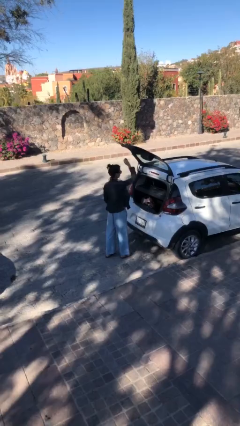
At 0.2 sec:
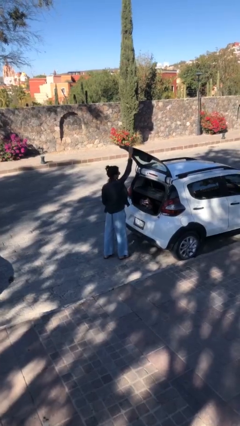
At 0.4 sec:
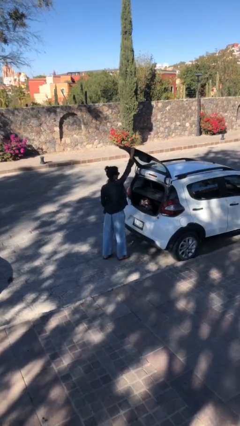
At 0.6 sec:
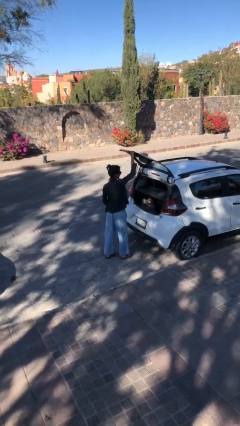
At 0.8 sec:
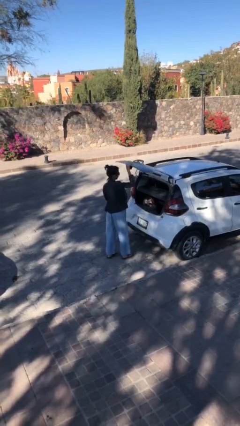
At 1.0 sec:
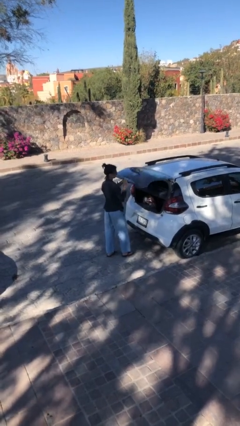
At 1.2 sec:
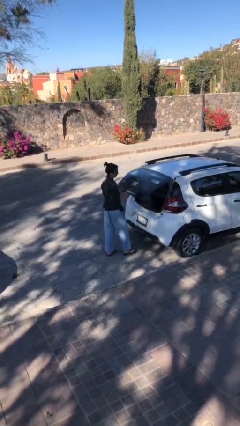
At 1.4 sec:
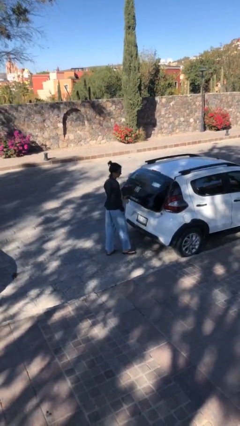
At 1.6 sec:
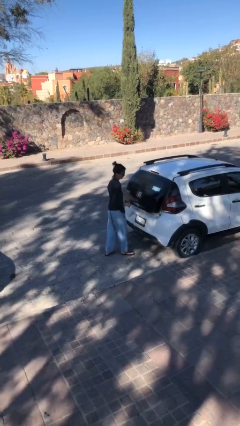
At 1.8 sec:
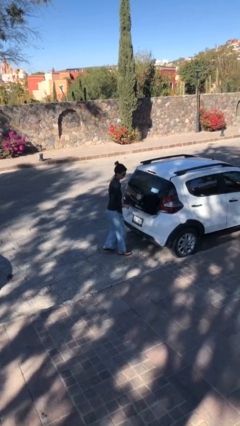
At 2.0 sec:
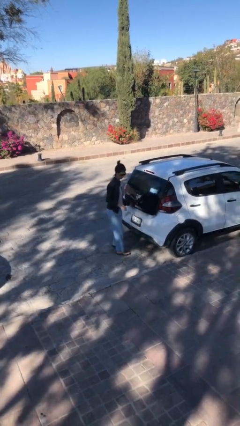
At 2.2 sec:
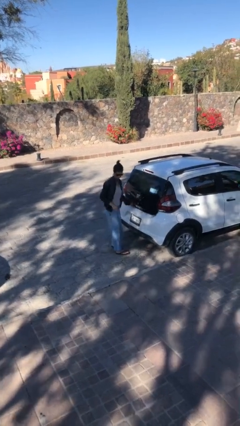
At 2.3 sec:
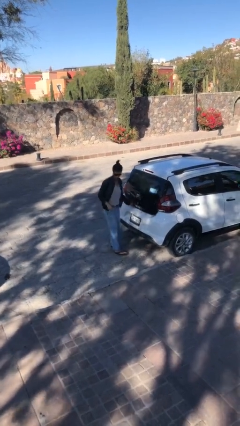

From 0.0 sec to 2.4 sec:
person closes car trunk

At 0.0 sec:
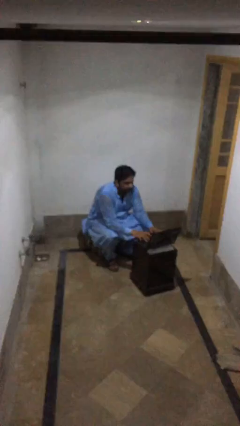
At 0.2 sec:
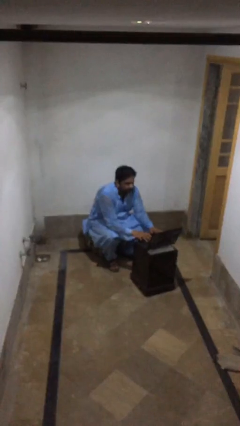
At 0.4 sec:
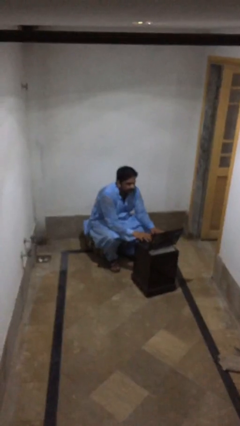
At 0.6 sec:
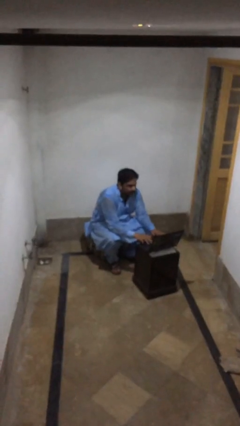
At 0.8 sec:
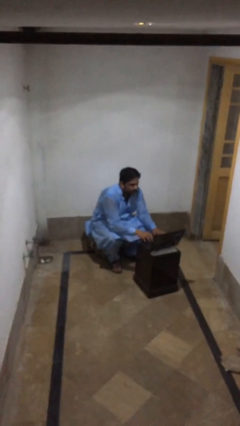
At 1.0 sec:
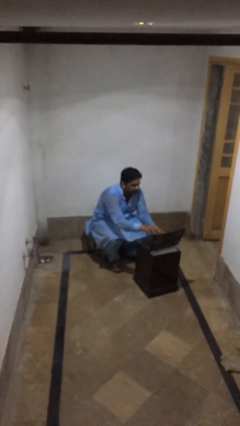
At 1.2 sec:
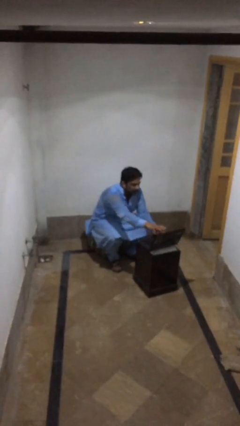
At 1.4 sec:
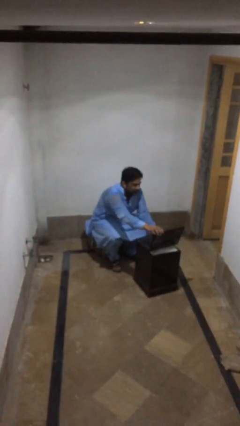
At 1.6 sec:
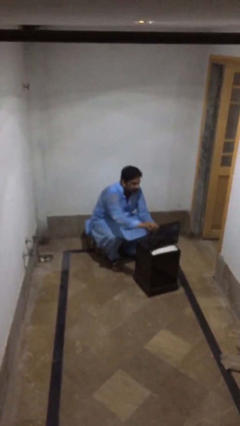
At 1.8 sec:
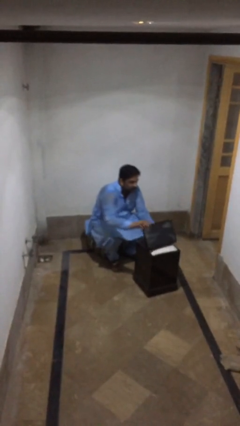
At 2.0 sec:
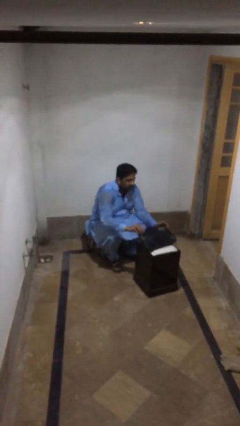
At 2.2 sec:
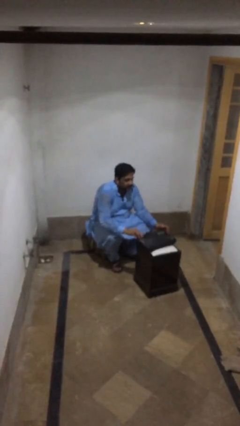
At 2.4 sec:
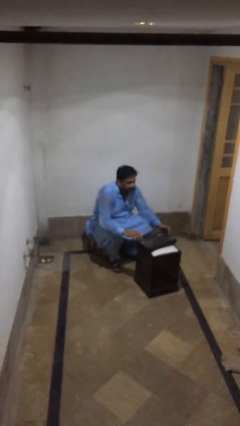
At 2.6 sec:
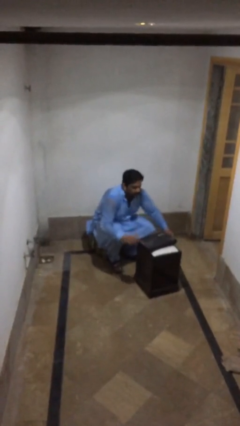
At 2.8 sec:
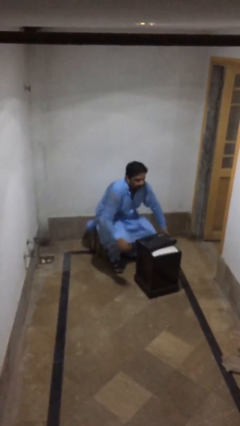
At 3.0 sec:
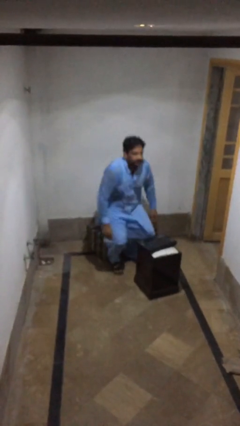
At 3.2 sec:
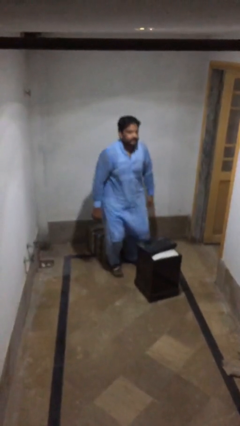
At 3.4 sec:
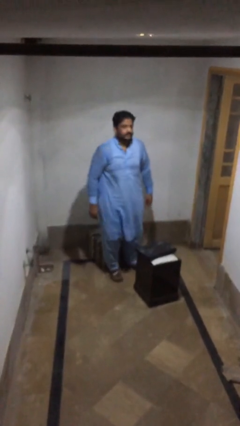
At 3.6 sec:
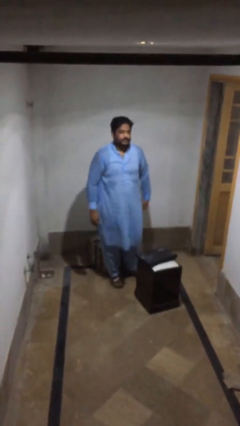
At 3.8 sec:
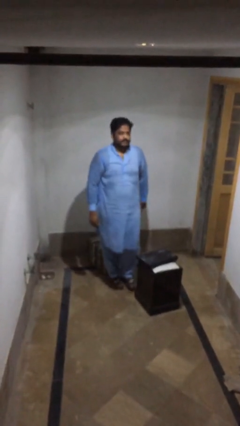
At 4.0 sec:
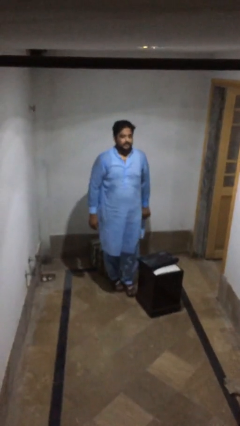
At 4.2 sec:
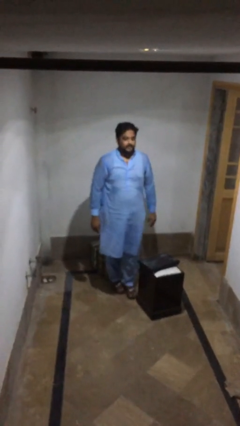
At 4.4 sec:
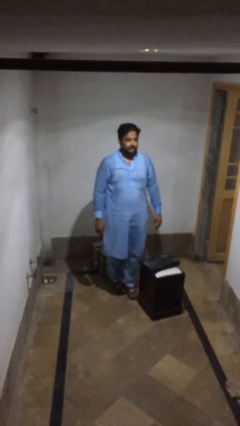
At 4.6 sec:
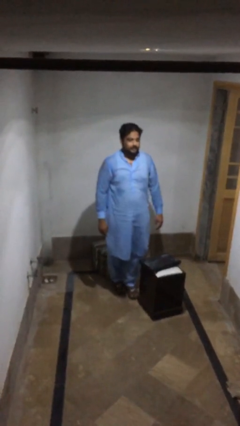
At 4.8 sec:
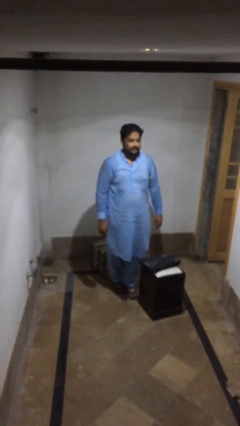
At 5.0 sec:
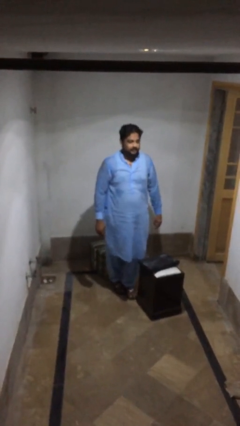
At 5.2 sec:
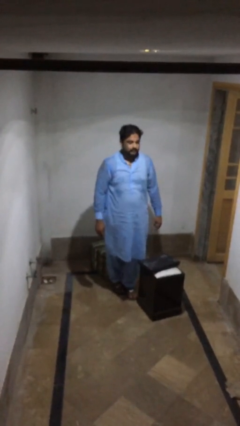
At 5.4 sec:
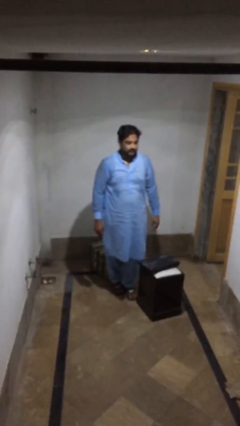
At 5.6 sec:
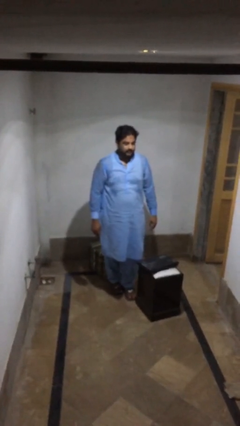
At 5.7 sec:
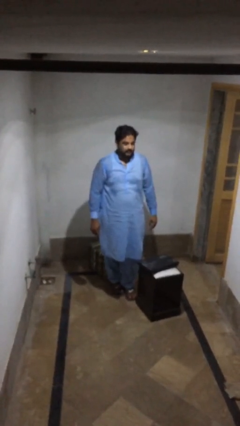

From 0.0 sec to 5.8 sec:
person stands up

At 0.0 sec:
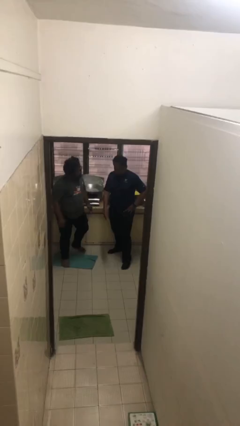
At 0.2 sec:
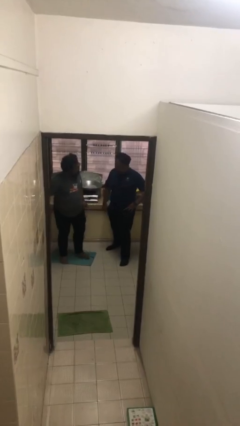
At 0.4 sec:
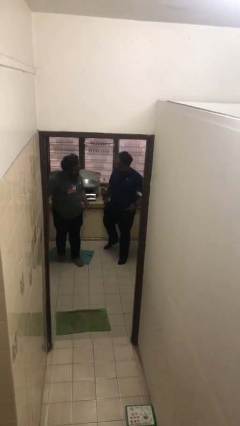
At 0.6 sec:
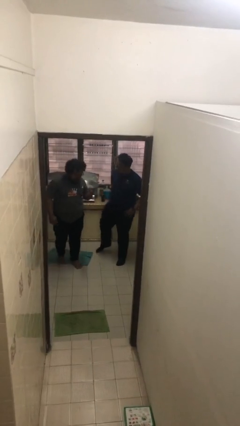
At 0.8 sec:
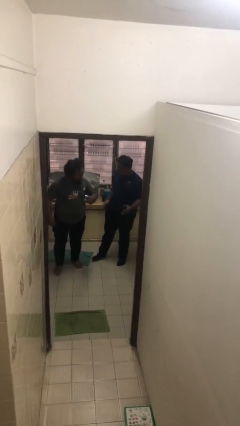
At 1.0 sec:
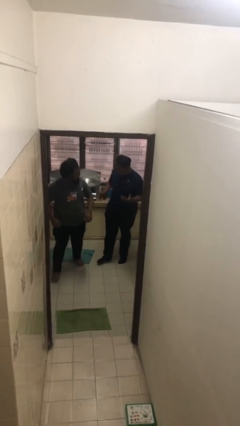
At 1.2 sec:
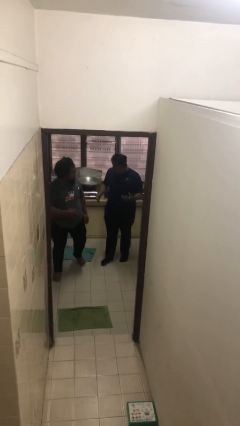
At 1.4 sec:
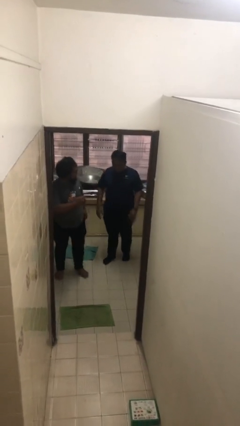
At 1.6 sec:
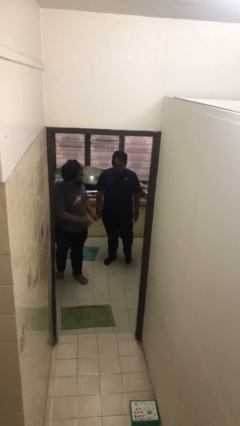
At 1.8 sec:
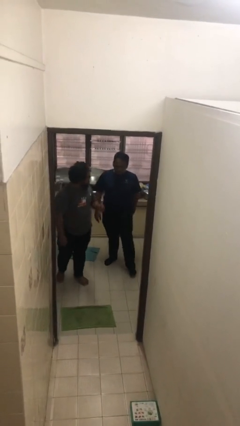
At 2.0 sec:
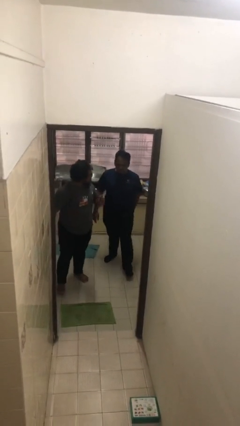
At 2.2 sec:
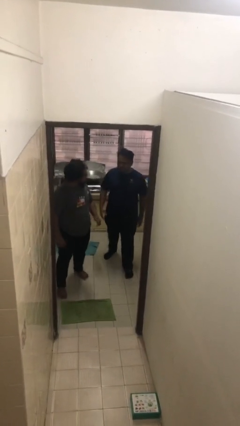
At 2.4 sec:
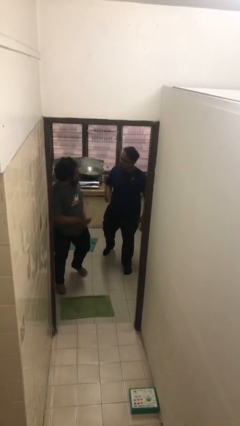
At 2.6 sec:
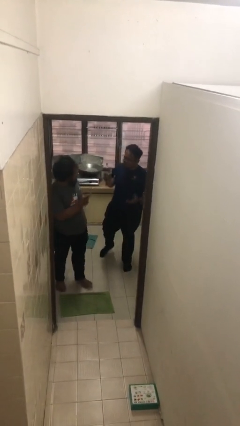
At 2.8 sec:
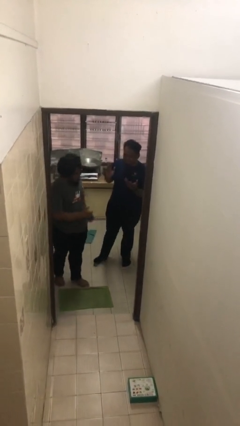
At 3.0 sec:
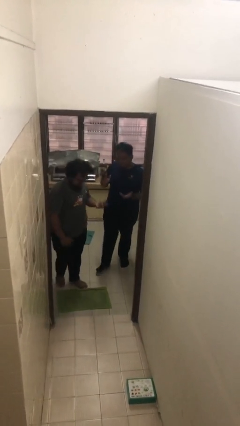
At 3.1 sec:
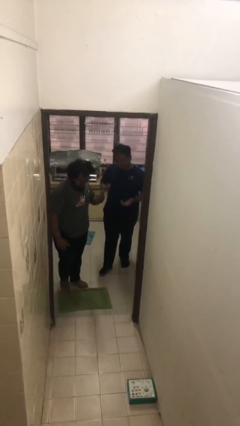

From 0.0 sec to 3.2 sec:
person talks to person

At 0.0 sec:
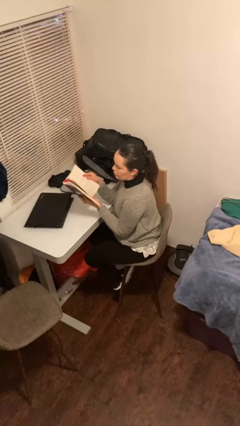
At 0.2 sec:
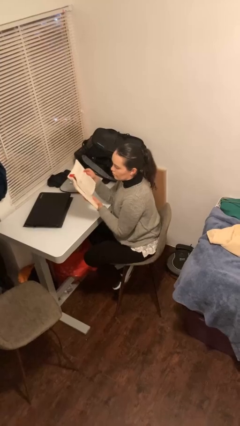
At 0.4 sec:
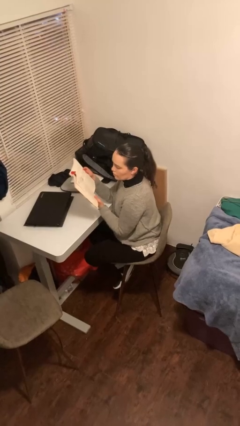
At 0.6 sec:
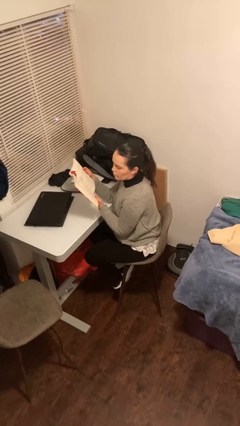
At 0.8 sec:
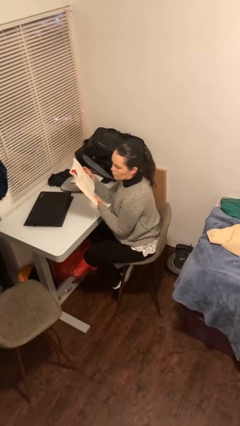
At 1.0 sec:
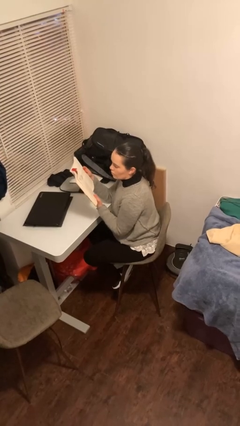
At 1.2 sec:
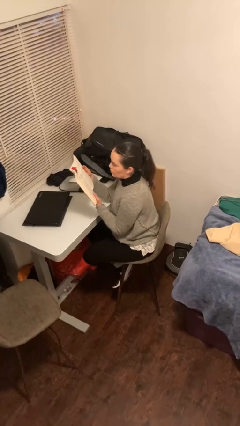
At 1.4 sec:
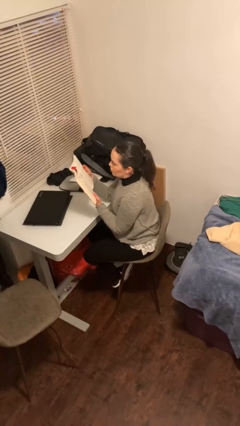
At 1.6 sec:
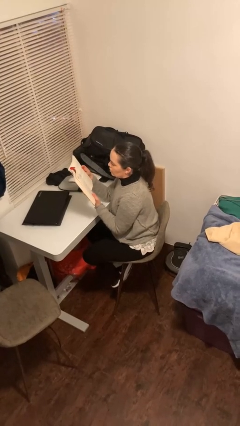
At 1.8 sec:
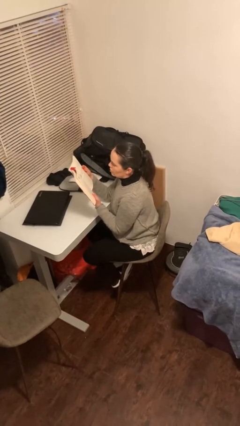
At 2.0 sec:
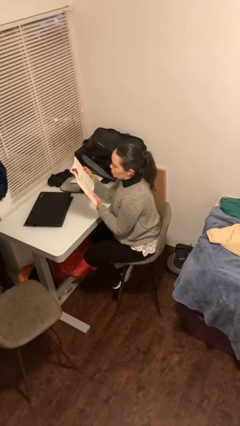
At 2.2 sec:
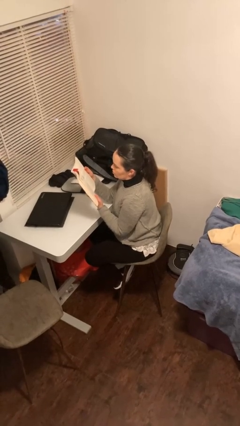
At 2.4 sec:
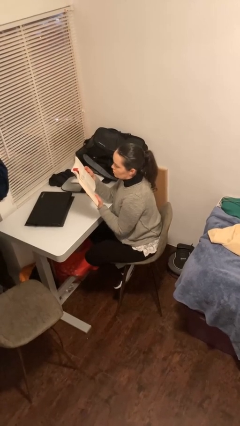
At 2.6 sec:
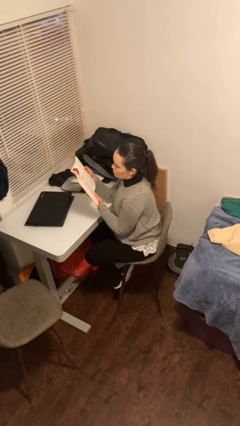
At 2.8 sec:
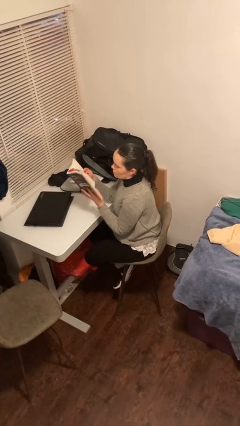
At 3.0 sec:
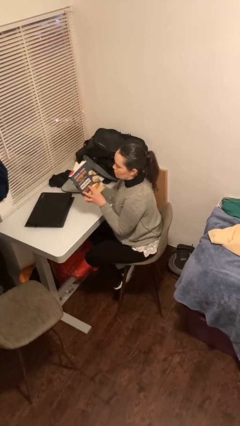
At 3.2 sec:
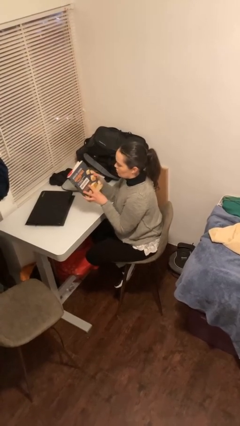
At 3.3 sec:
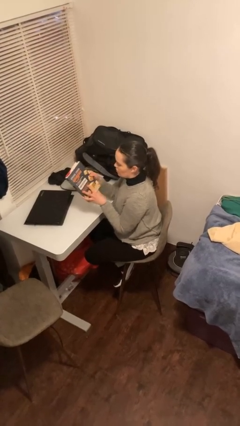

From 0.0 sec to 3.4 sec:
person reads document

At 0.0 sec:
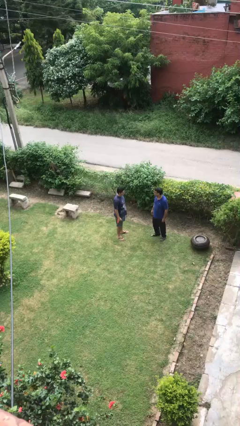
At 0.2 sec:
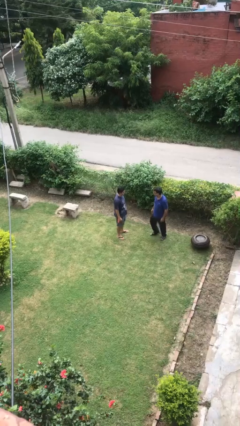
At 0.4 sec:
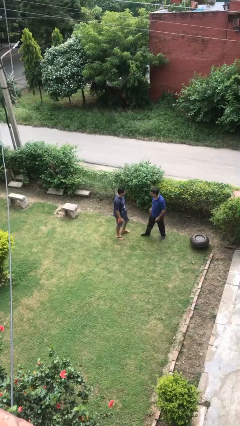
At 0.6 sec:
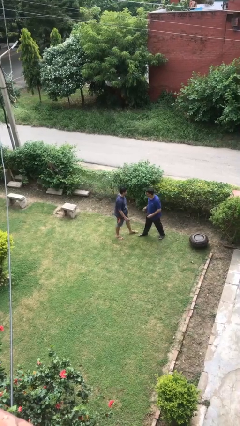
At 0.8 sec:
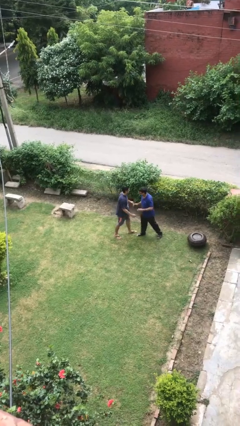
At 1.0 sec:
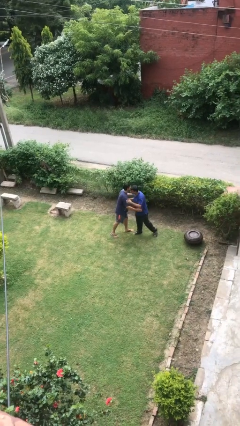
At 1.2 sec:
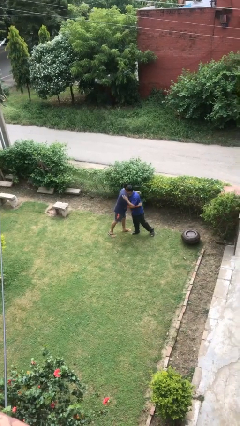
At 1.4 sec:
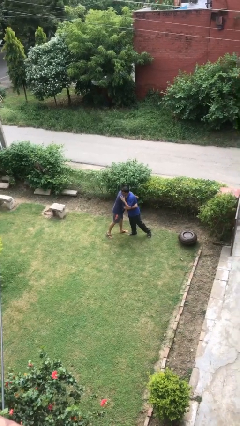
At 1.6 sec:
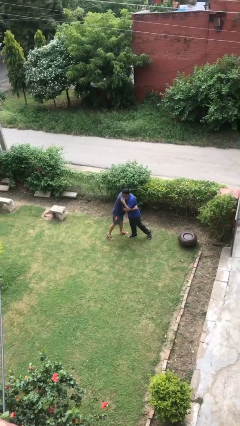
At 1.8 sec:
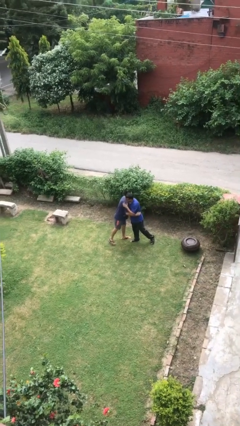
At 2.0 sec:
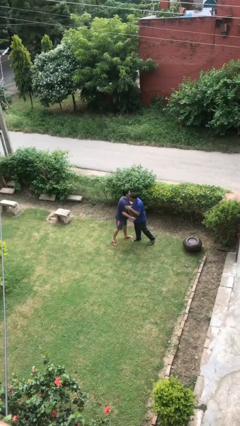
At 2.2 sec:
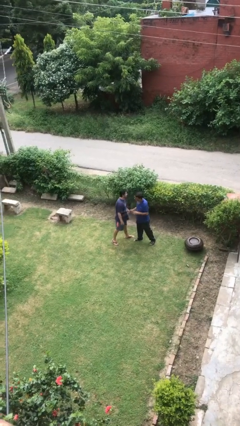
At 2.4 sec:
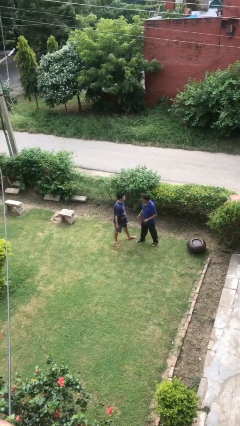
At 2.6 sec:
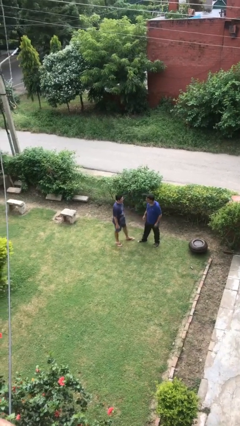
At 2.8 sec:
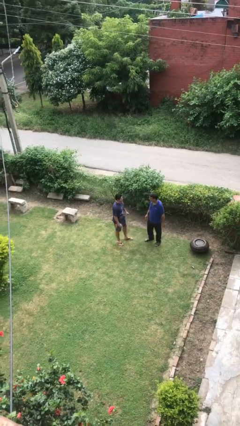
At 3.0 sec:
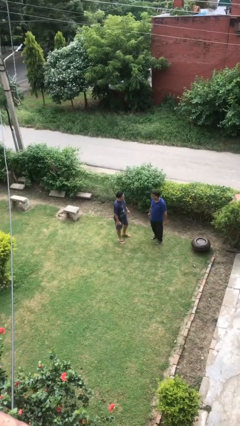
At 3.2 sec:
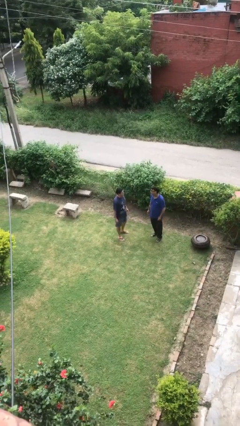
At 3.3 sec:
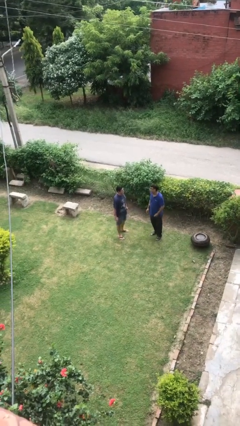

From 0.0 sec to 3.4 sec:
person embraces person
